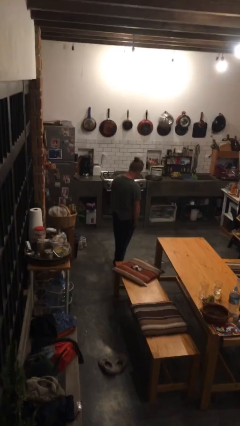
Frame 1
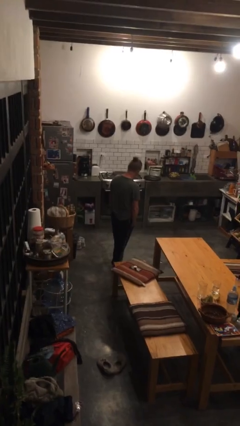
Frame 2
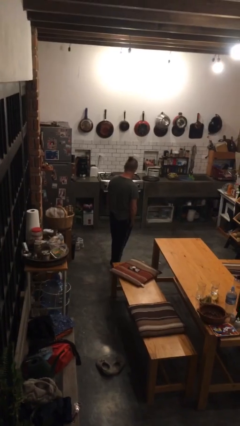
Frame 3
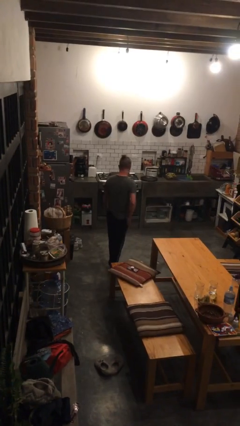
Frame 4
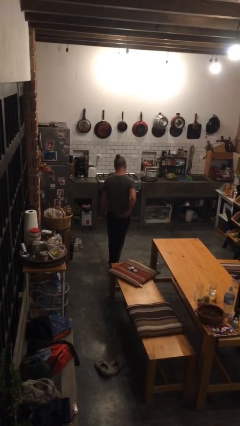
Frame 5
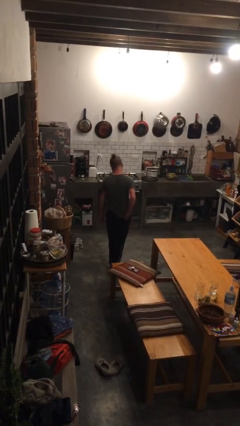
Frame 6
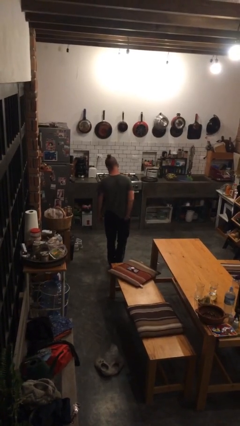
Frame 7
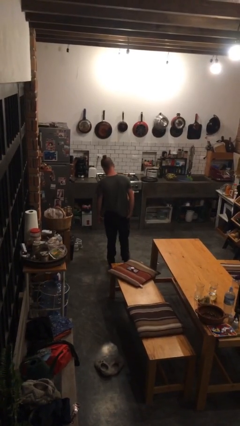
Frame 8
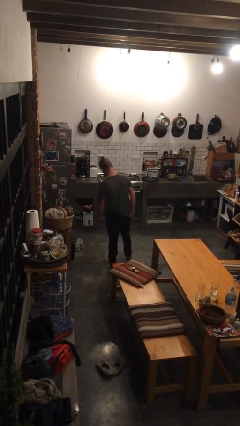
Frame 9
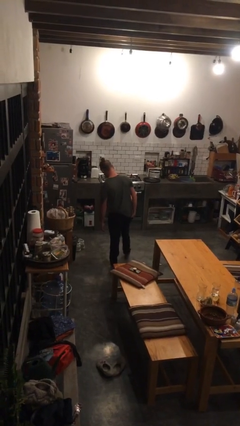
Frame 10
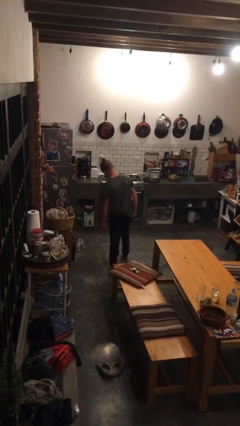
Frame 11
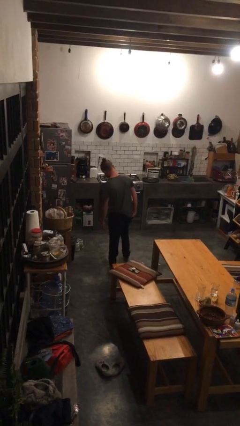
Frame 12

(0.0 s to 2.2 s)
person puts hands in back pockets

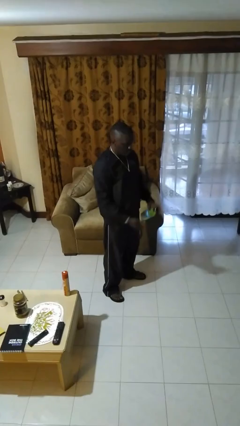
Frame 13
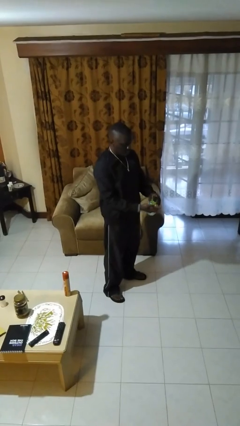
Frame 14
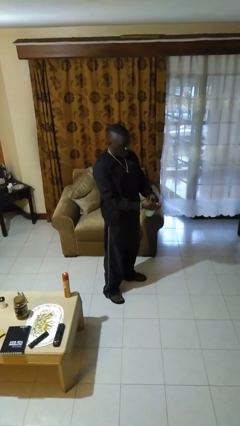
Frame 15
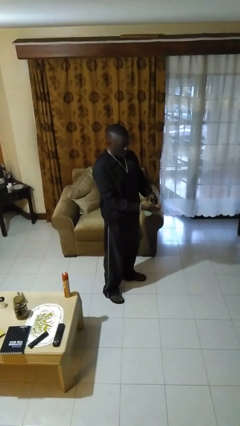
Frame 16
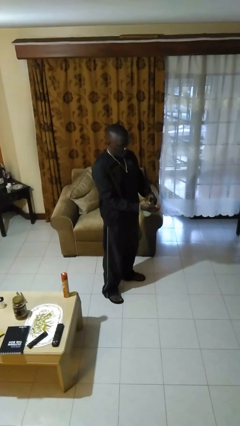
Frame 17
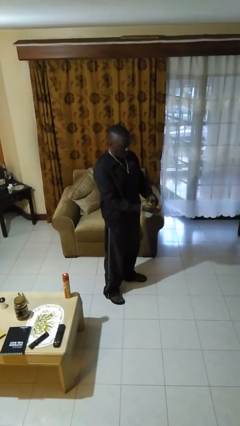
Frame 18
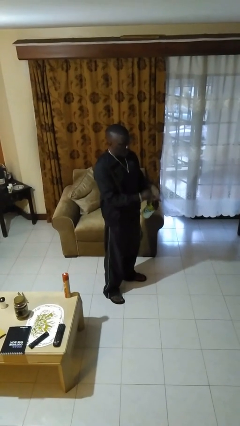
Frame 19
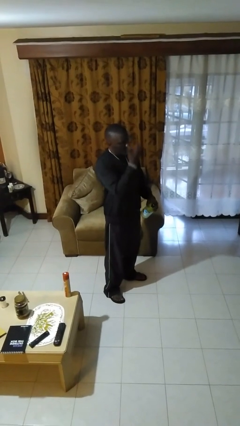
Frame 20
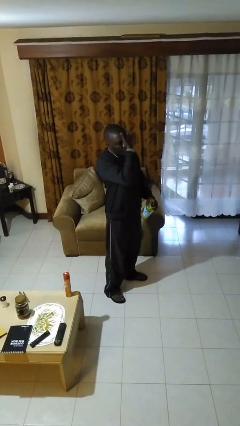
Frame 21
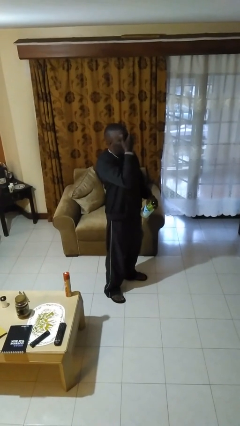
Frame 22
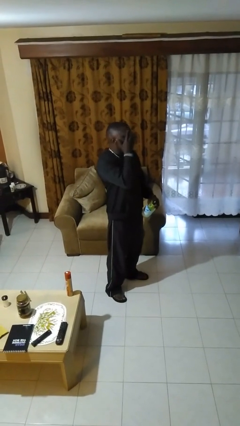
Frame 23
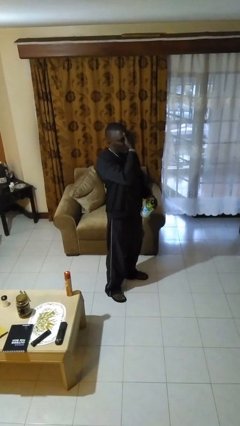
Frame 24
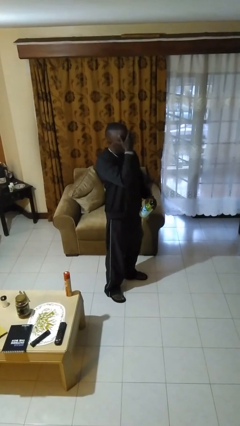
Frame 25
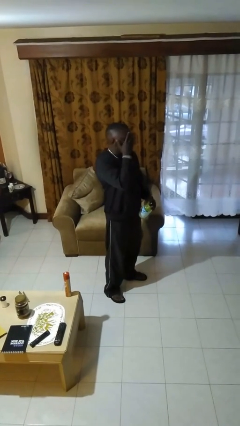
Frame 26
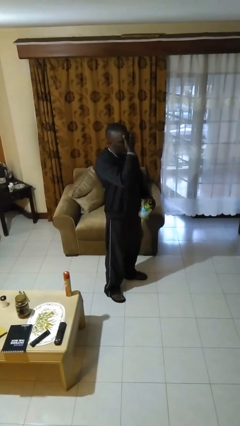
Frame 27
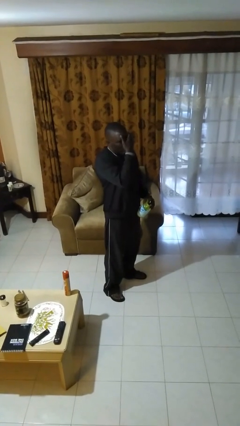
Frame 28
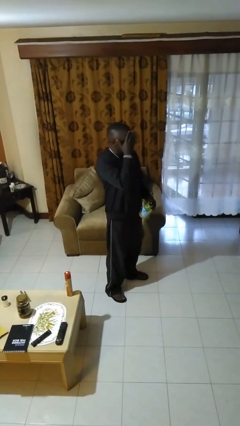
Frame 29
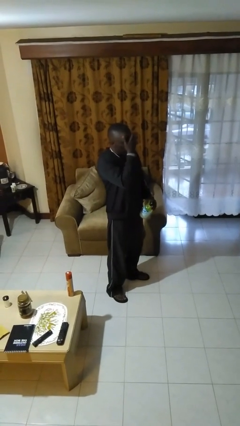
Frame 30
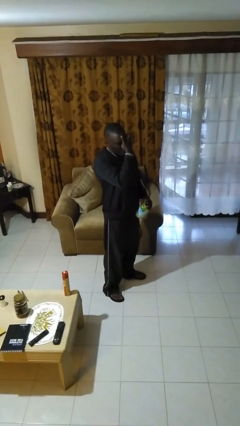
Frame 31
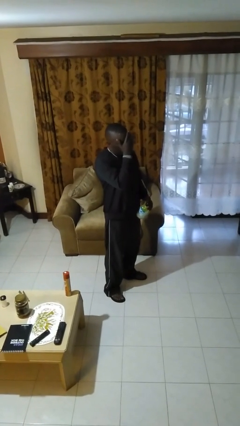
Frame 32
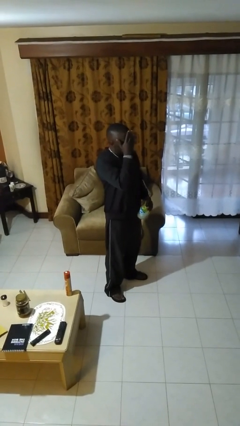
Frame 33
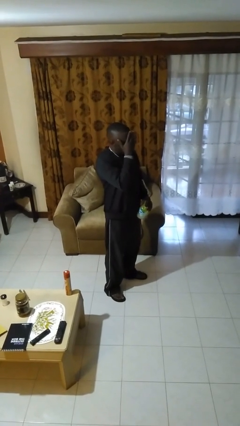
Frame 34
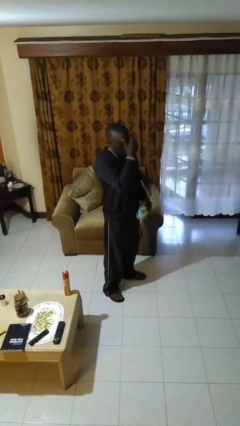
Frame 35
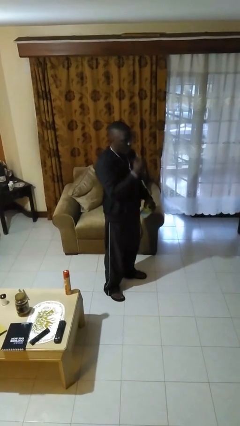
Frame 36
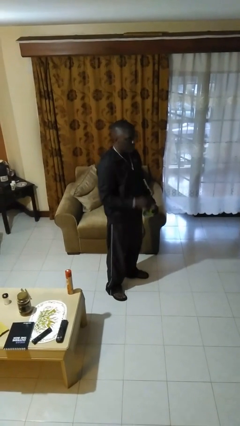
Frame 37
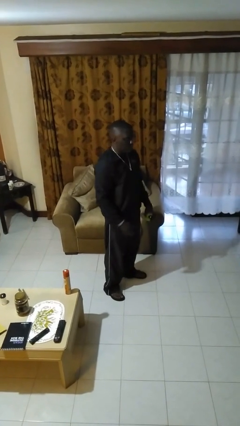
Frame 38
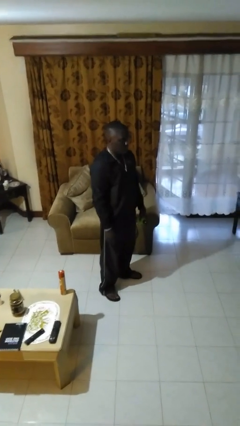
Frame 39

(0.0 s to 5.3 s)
person applies facial moisturizer

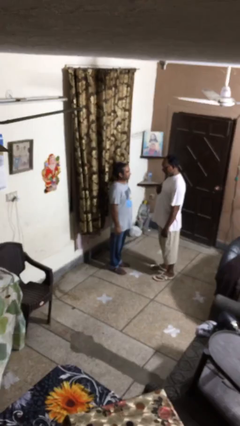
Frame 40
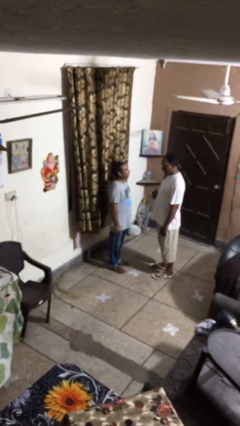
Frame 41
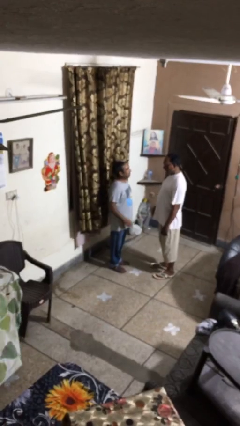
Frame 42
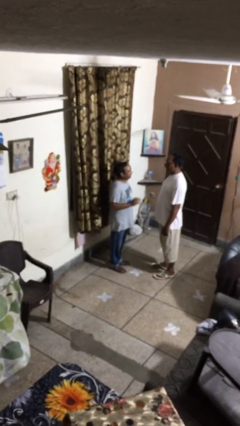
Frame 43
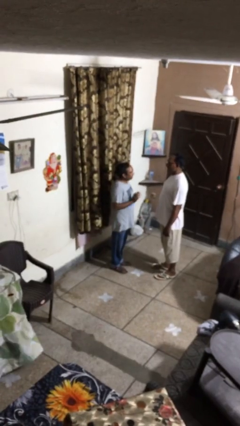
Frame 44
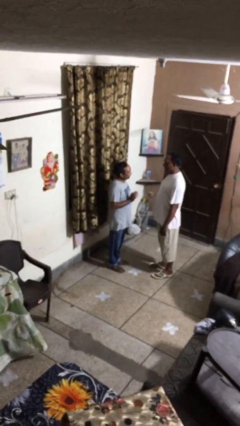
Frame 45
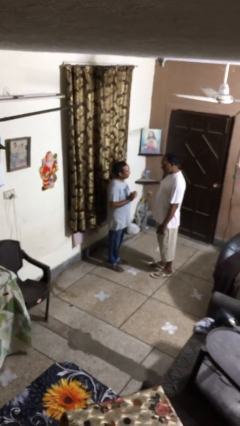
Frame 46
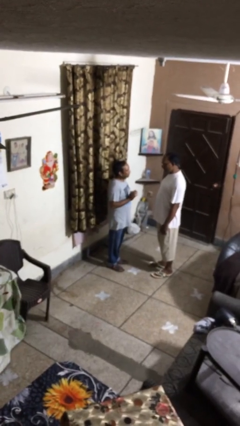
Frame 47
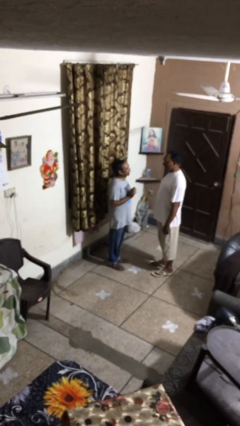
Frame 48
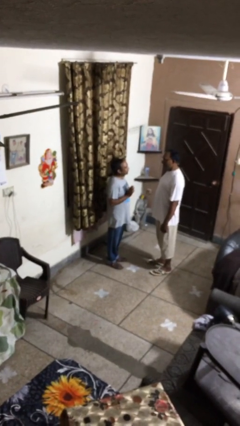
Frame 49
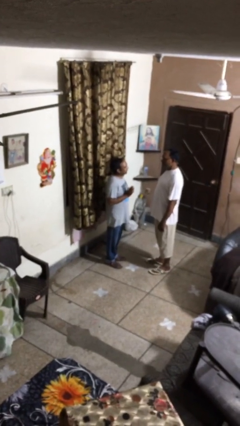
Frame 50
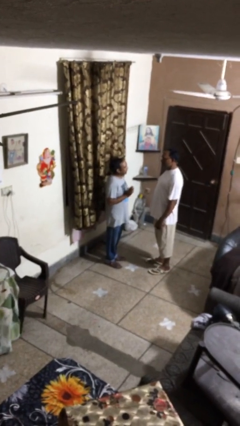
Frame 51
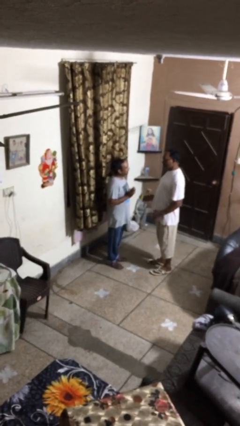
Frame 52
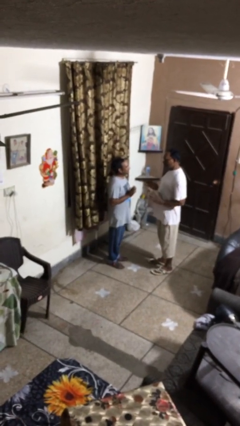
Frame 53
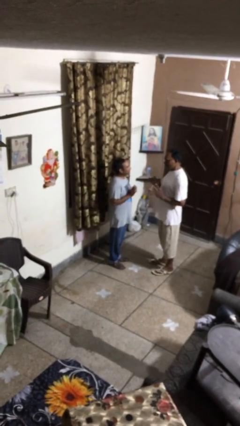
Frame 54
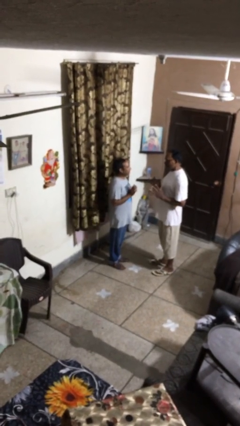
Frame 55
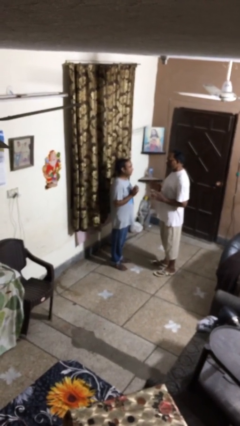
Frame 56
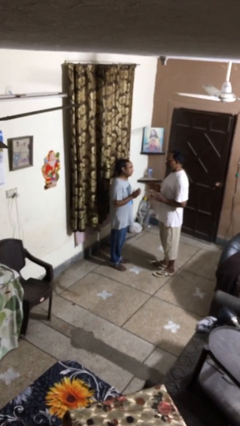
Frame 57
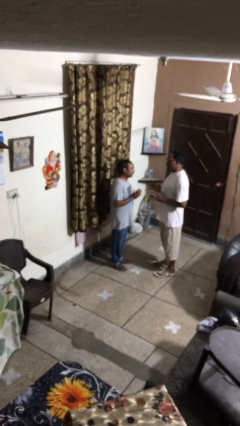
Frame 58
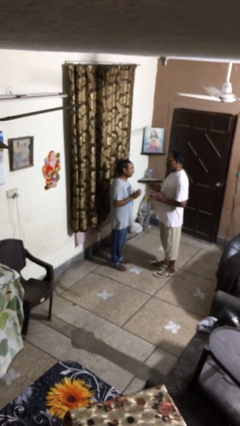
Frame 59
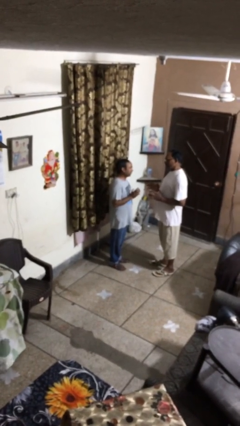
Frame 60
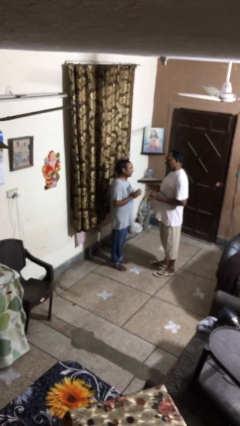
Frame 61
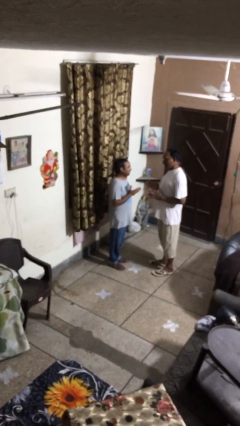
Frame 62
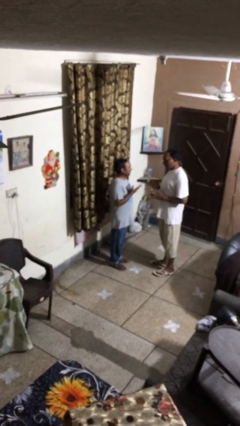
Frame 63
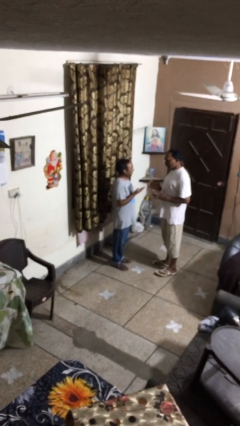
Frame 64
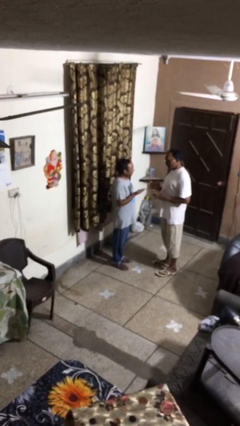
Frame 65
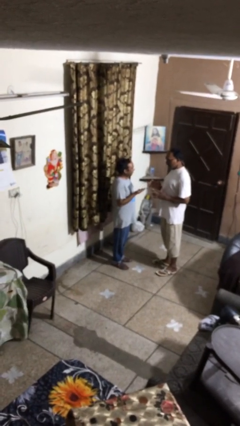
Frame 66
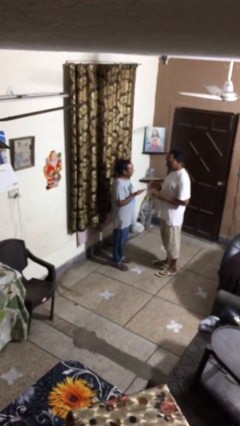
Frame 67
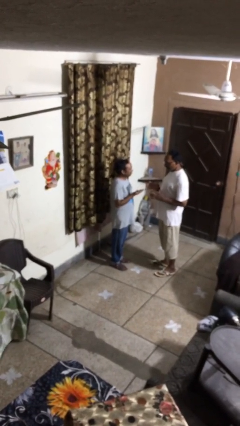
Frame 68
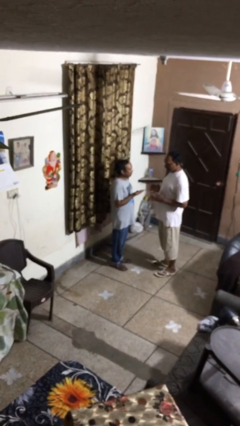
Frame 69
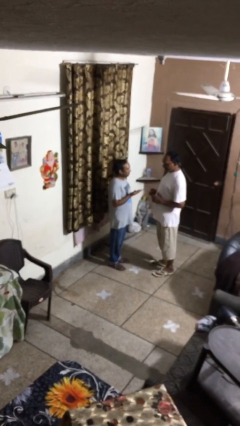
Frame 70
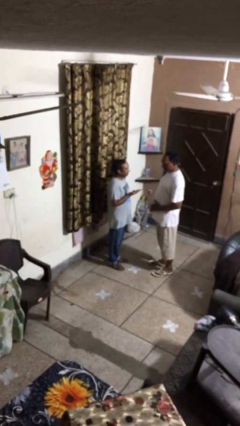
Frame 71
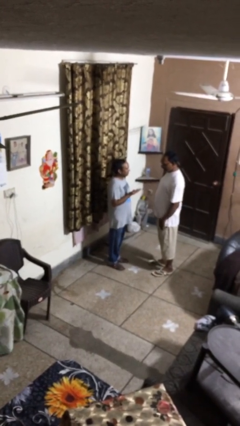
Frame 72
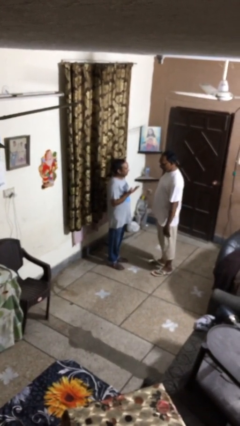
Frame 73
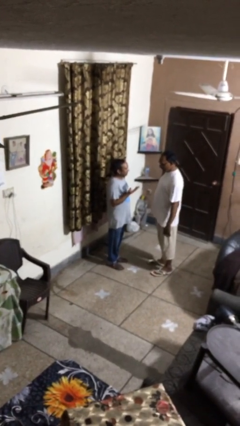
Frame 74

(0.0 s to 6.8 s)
person talks to person

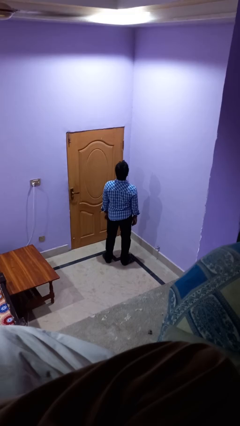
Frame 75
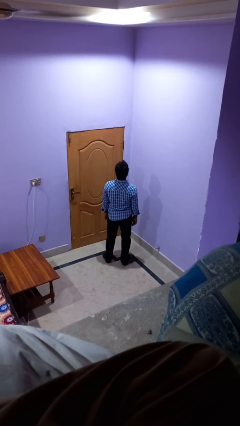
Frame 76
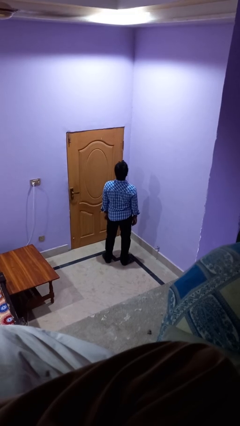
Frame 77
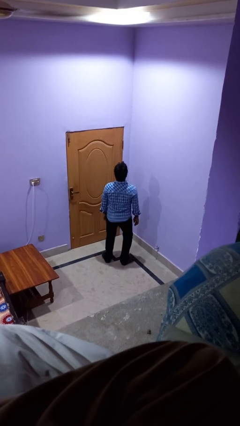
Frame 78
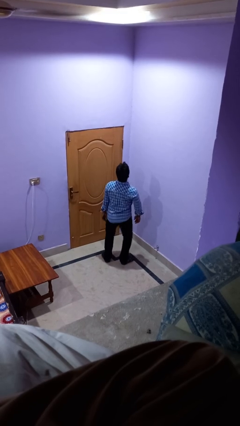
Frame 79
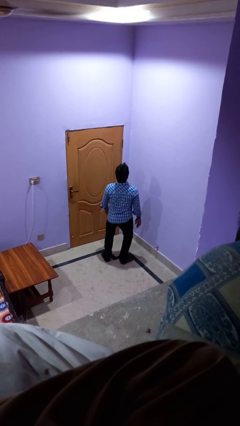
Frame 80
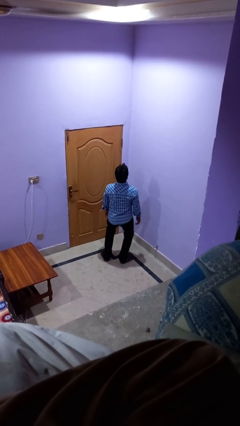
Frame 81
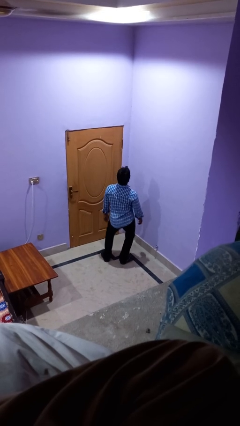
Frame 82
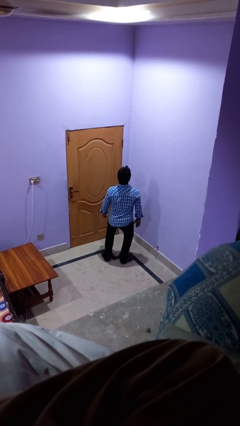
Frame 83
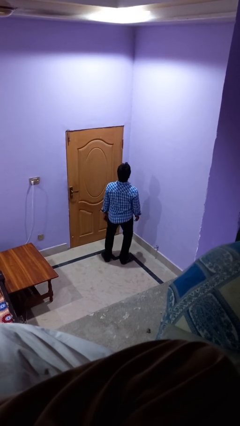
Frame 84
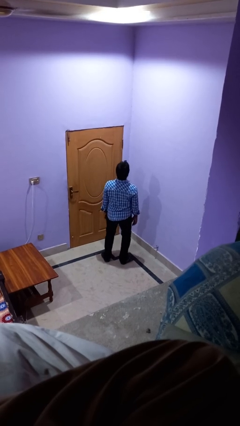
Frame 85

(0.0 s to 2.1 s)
person wiggles hips

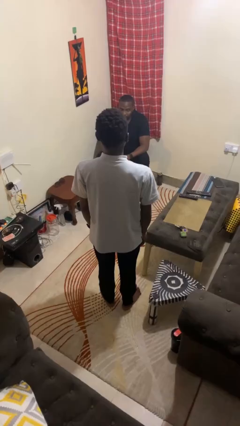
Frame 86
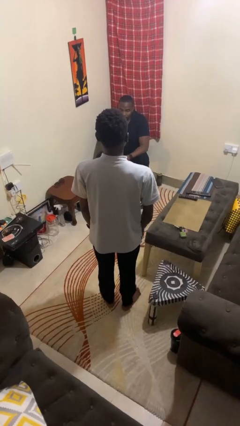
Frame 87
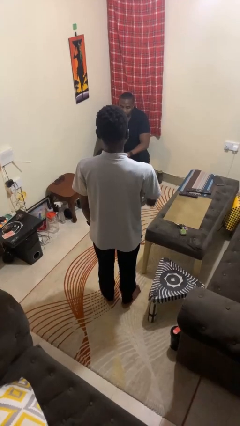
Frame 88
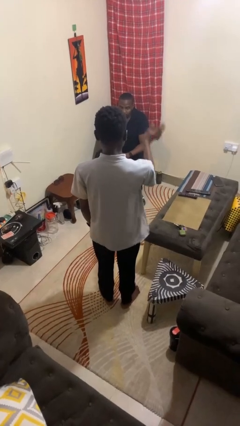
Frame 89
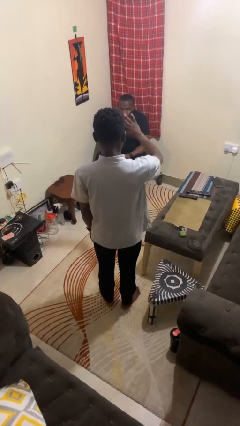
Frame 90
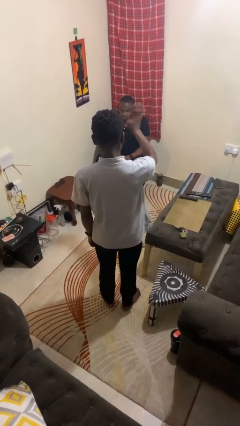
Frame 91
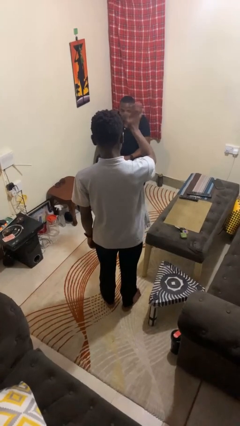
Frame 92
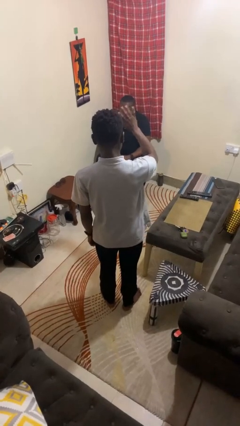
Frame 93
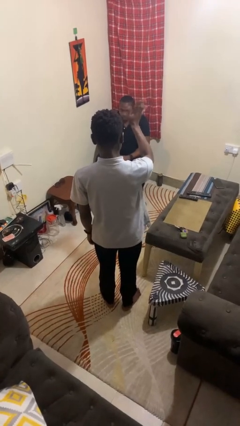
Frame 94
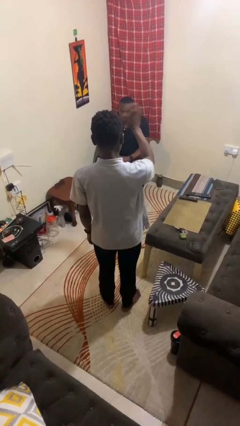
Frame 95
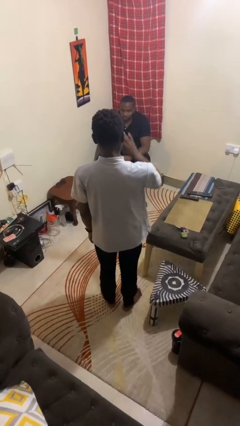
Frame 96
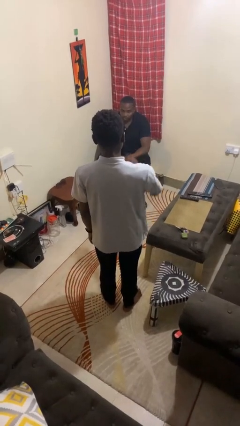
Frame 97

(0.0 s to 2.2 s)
person waves at person
